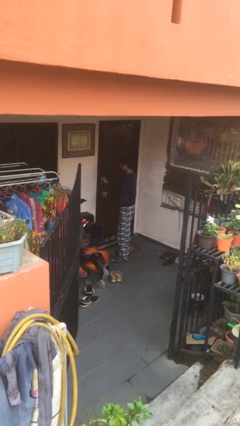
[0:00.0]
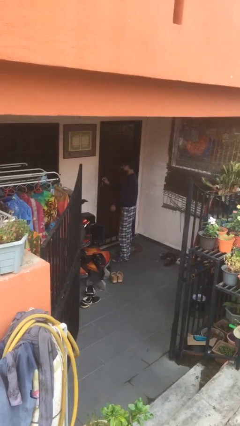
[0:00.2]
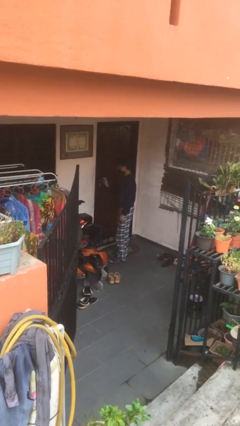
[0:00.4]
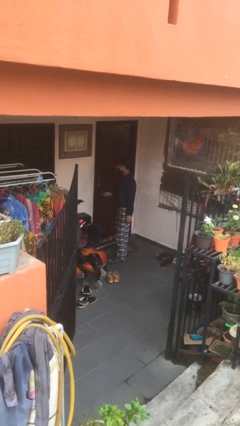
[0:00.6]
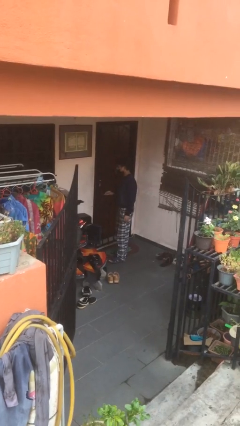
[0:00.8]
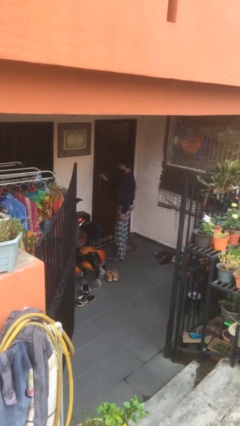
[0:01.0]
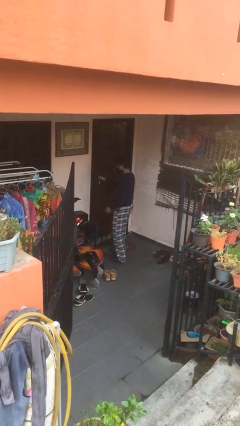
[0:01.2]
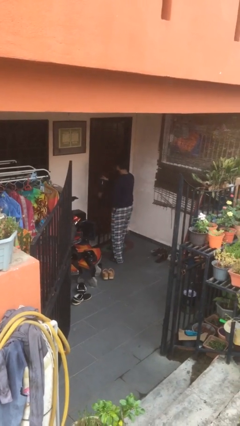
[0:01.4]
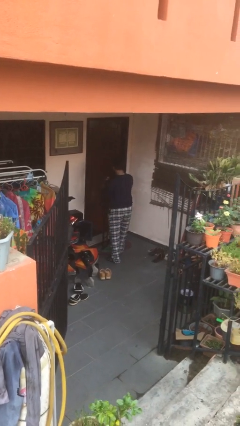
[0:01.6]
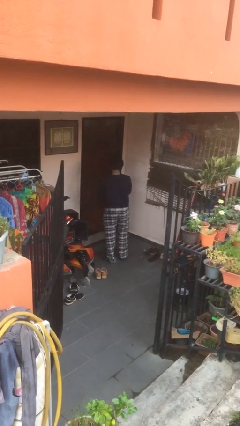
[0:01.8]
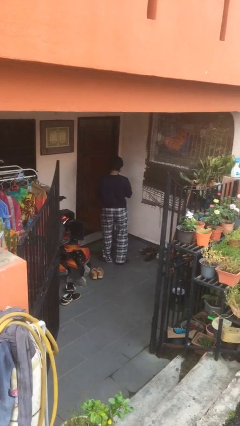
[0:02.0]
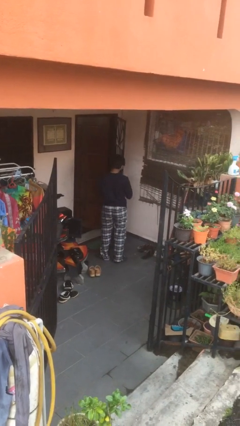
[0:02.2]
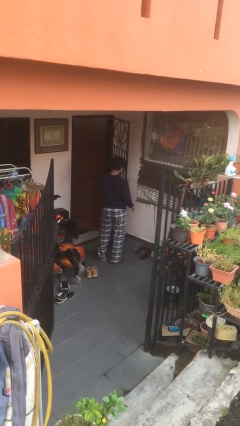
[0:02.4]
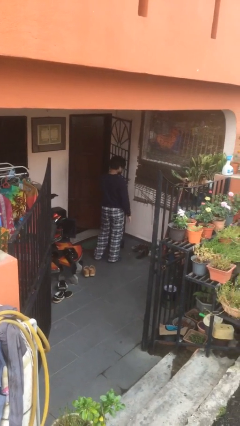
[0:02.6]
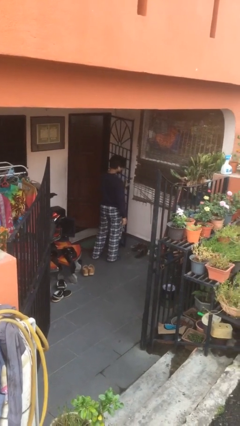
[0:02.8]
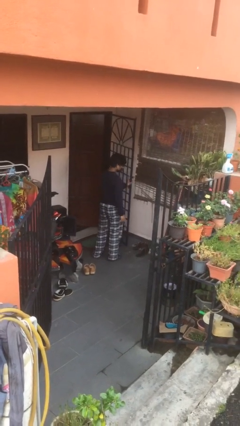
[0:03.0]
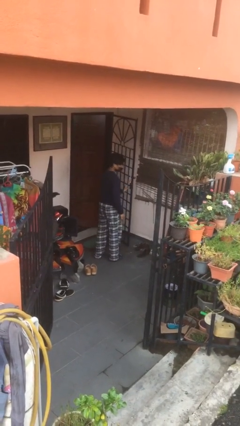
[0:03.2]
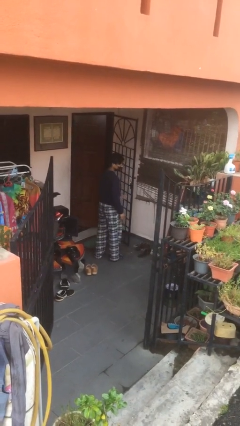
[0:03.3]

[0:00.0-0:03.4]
person opens facility door

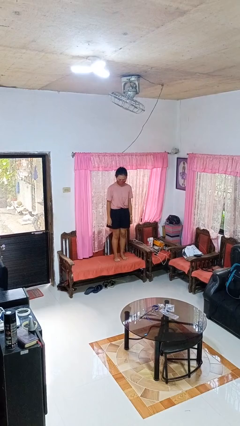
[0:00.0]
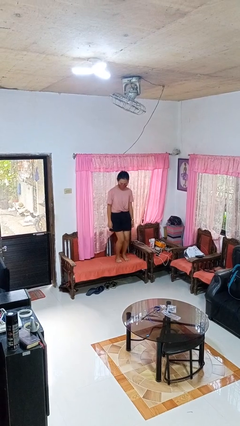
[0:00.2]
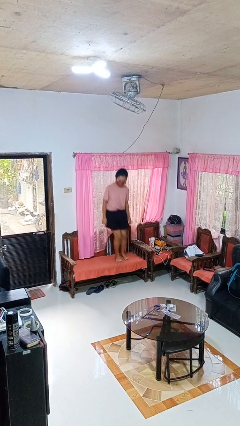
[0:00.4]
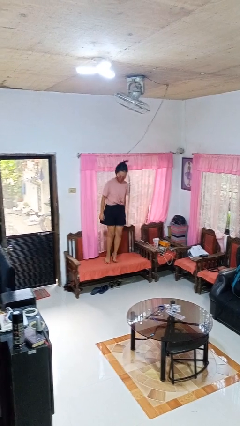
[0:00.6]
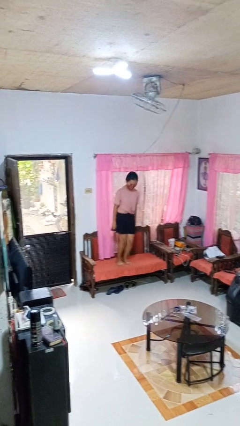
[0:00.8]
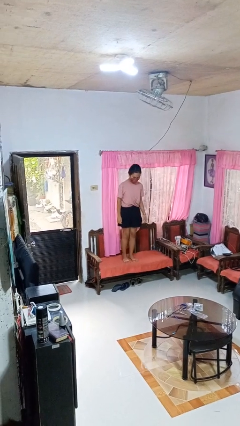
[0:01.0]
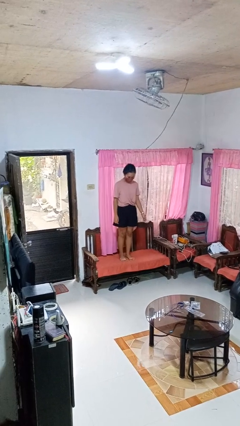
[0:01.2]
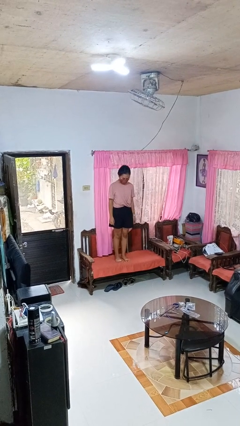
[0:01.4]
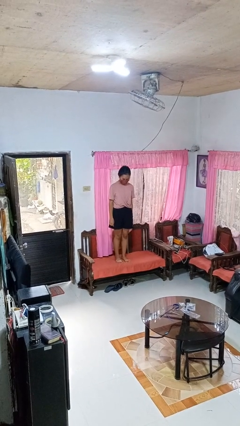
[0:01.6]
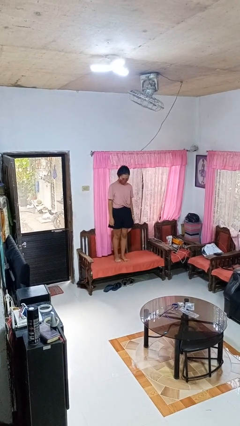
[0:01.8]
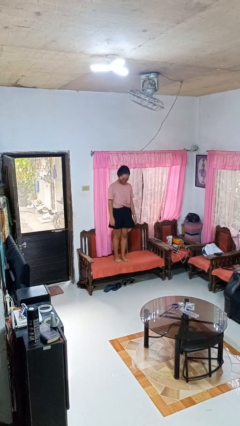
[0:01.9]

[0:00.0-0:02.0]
person jumps on couch

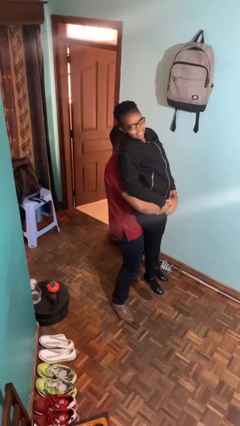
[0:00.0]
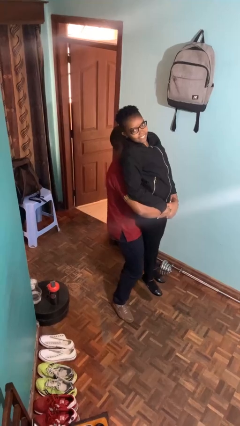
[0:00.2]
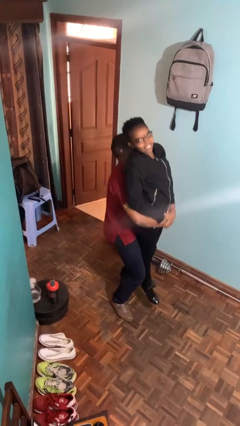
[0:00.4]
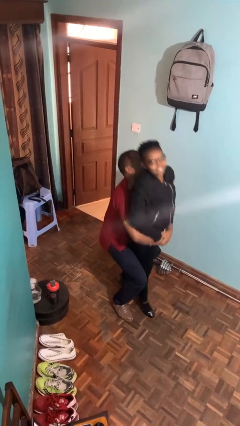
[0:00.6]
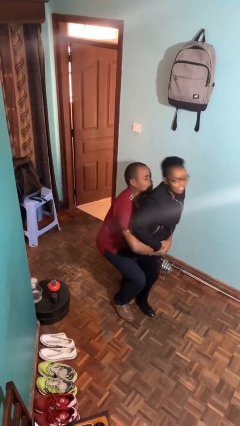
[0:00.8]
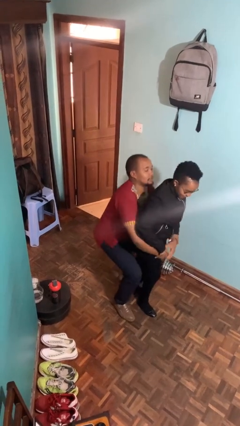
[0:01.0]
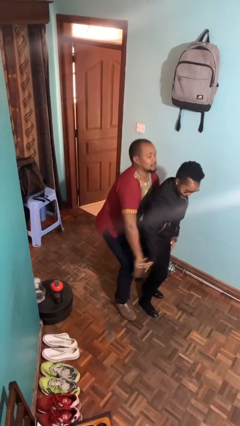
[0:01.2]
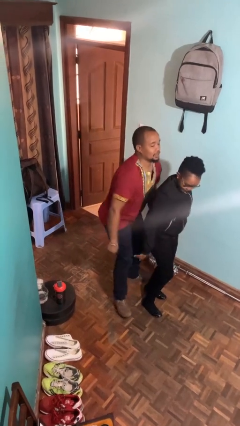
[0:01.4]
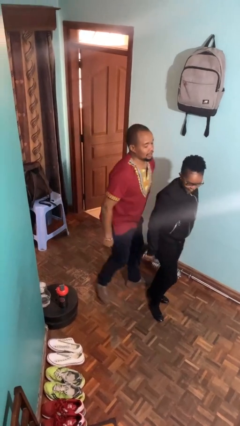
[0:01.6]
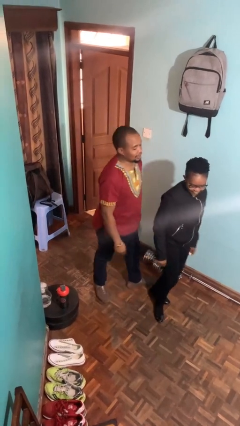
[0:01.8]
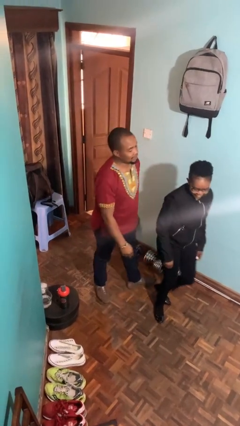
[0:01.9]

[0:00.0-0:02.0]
person puts down person

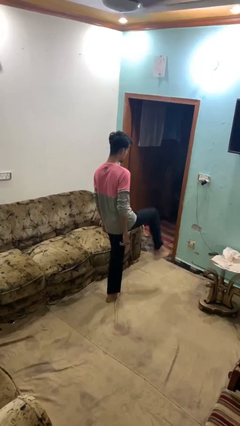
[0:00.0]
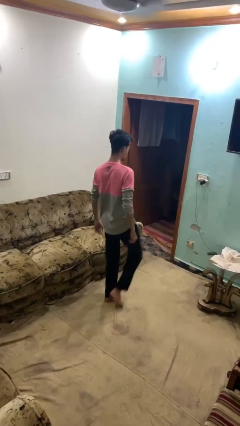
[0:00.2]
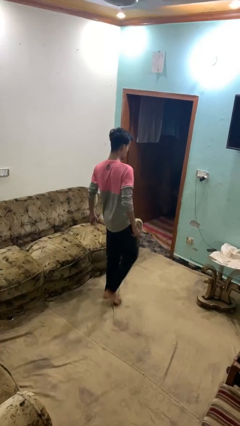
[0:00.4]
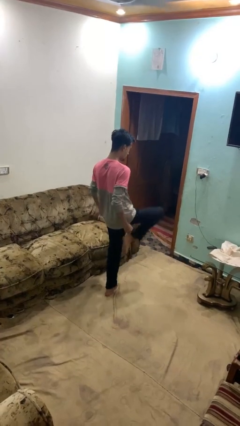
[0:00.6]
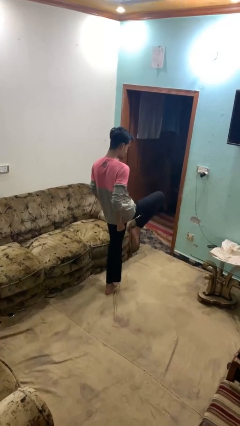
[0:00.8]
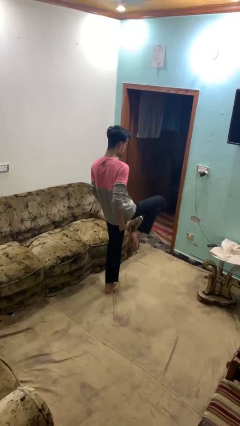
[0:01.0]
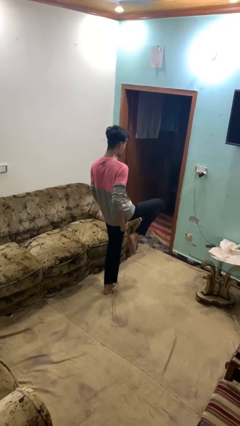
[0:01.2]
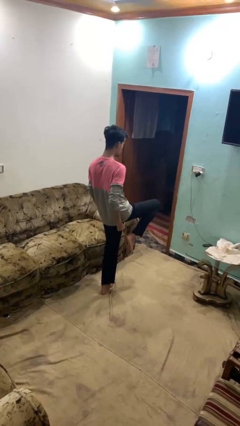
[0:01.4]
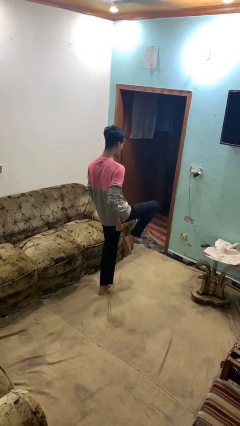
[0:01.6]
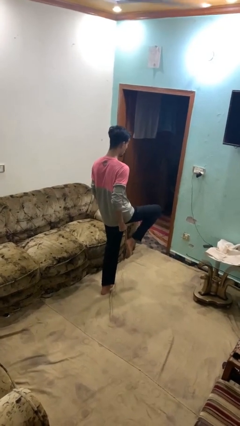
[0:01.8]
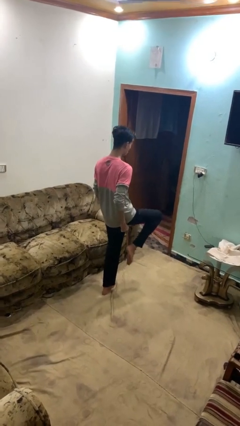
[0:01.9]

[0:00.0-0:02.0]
person karate chop

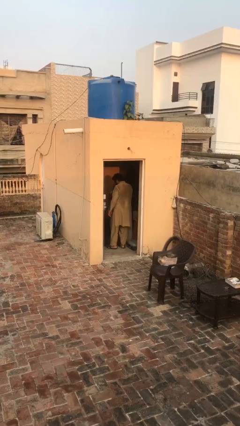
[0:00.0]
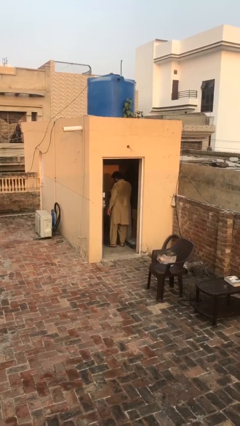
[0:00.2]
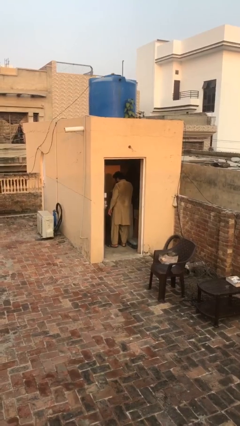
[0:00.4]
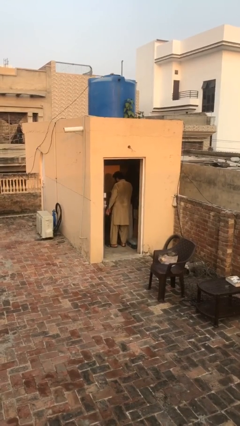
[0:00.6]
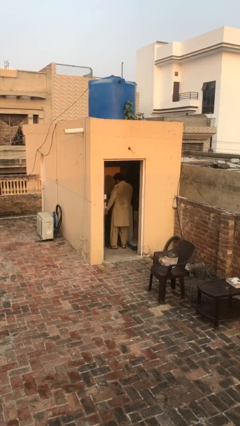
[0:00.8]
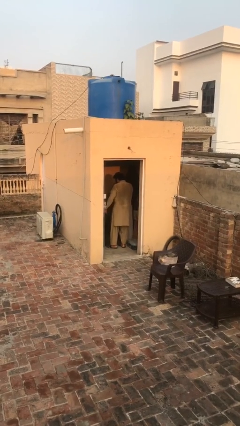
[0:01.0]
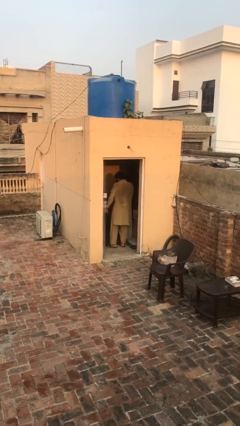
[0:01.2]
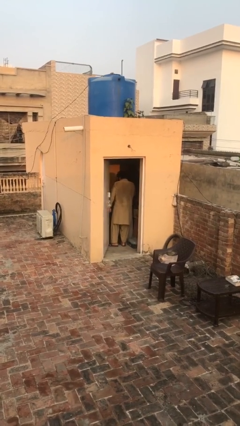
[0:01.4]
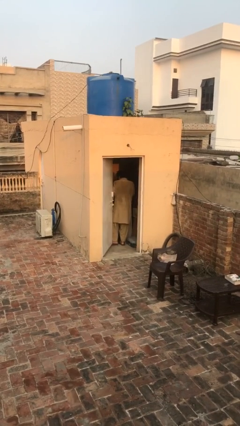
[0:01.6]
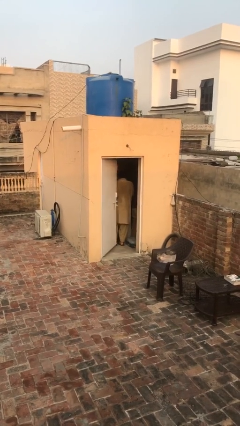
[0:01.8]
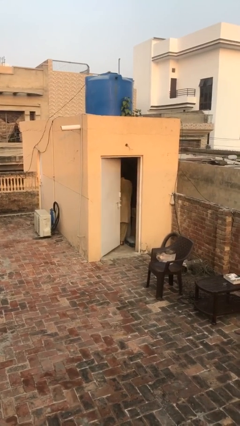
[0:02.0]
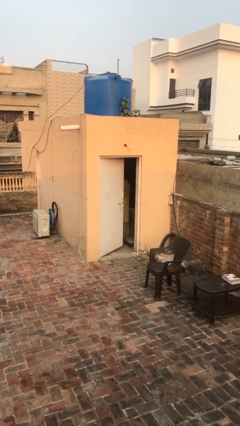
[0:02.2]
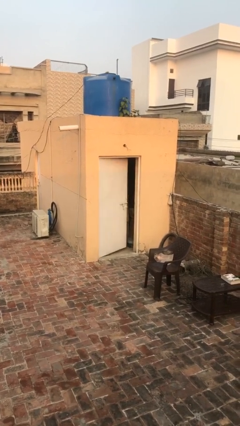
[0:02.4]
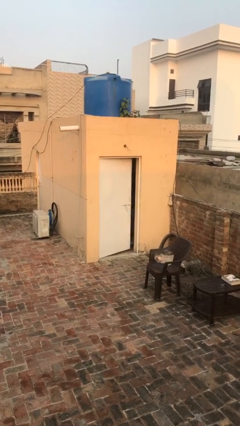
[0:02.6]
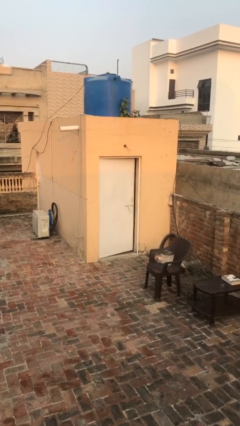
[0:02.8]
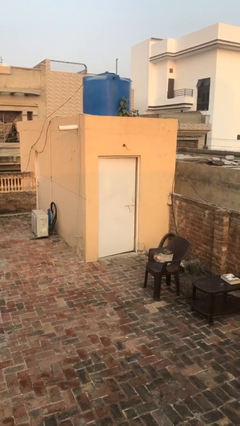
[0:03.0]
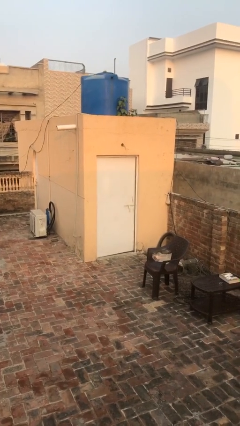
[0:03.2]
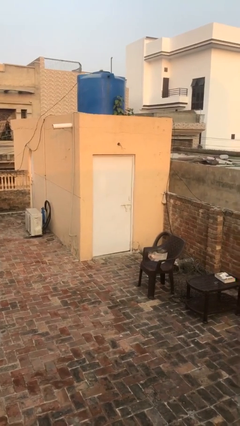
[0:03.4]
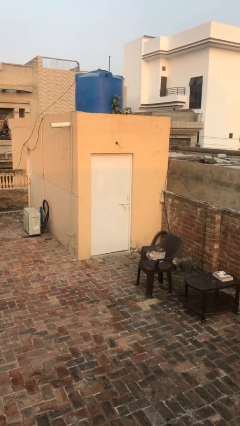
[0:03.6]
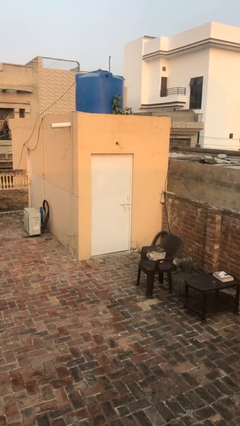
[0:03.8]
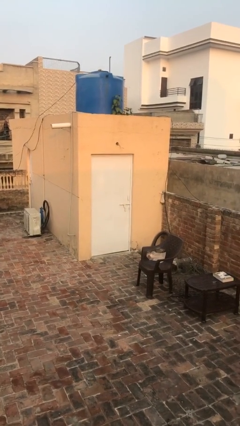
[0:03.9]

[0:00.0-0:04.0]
person closes facility door

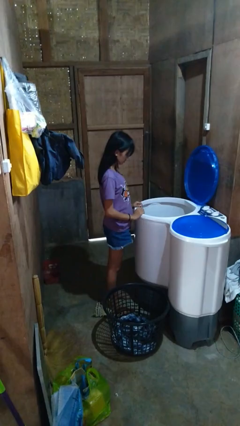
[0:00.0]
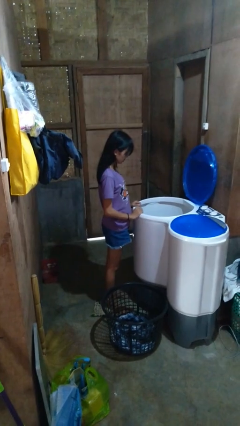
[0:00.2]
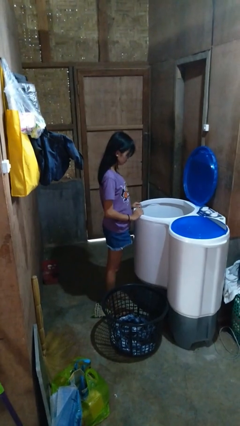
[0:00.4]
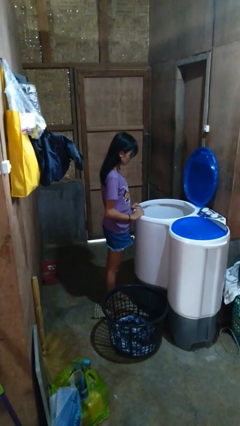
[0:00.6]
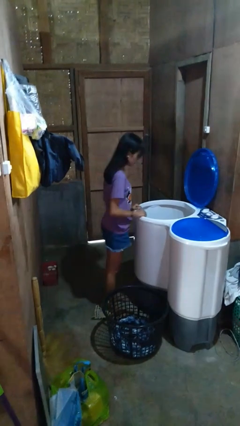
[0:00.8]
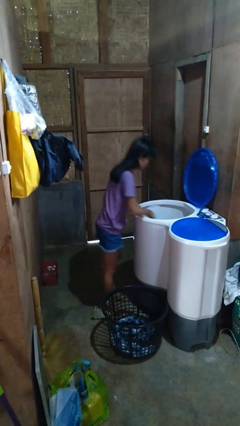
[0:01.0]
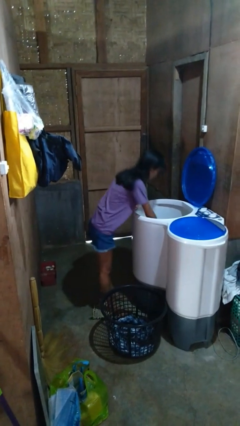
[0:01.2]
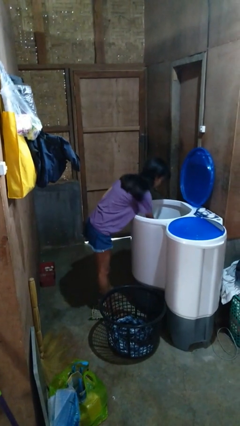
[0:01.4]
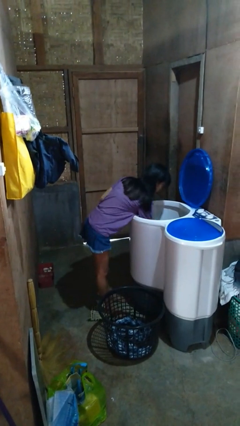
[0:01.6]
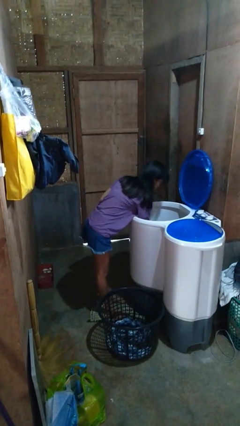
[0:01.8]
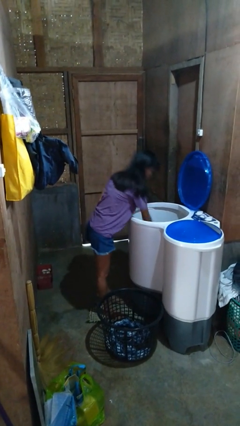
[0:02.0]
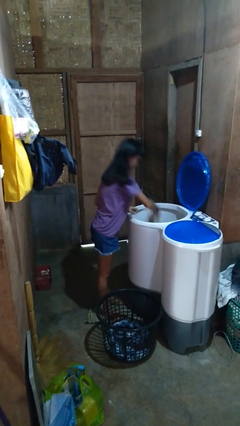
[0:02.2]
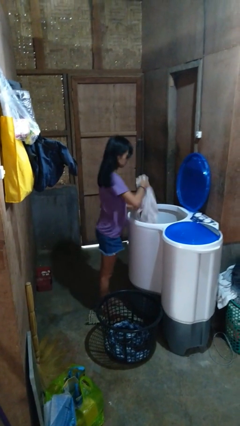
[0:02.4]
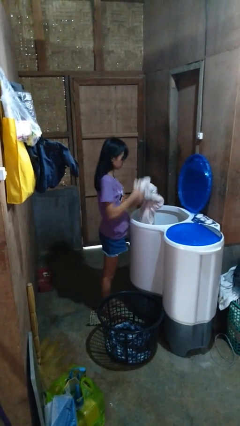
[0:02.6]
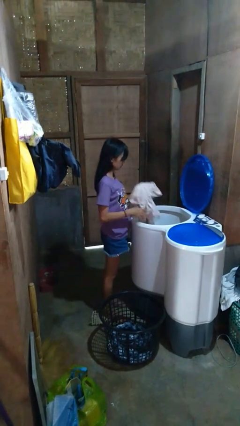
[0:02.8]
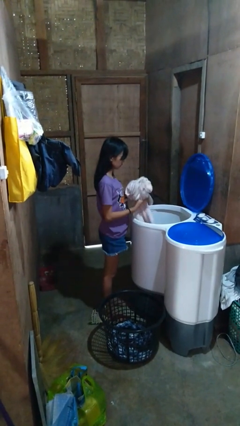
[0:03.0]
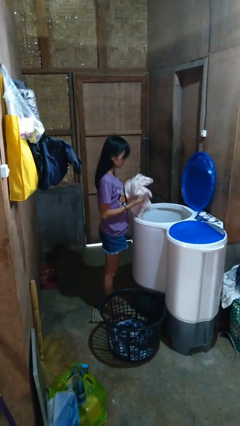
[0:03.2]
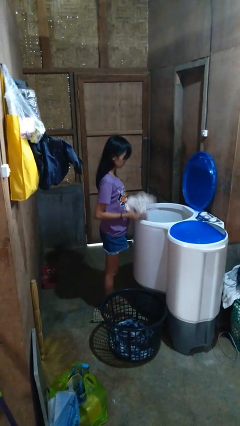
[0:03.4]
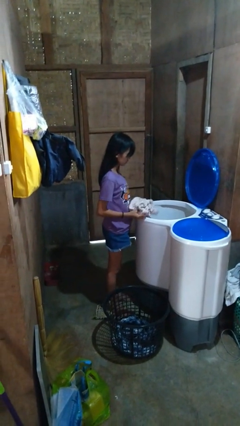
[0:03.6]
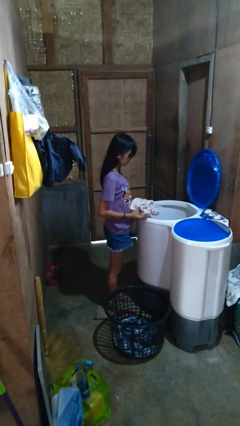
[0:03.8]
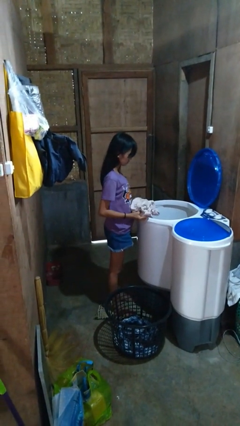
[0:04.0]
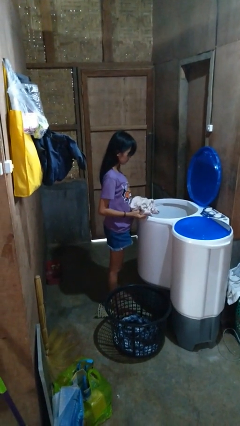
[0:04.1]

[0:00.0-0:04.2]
person loads clotheswasher
